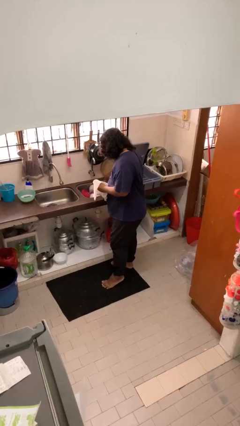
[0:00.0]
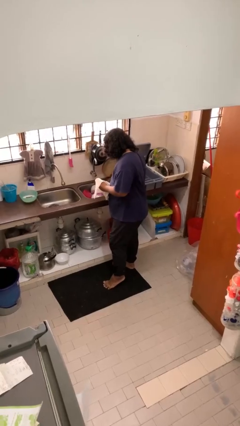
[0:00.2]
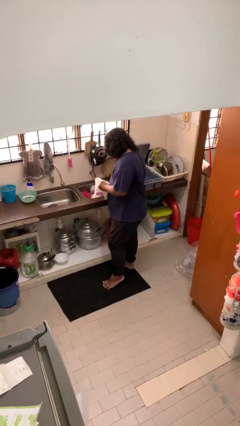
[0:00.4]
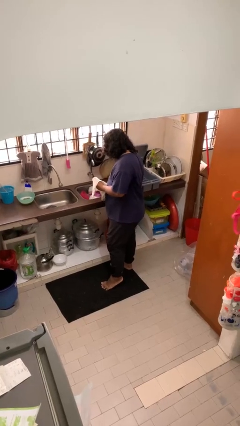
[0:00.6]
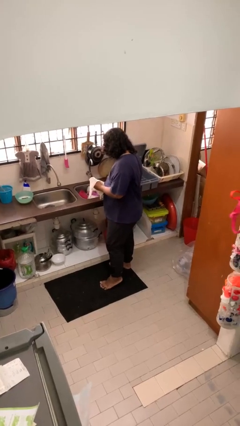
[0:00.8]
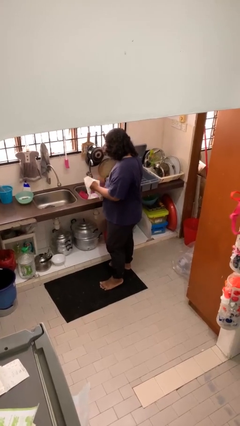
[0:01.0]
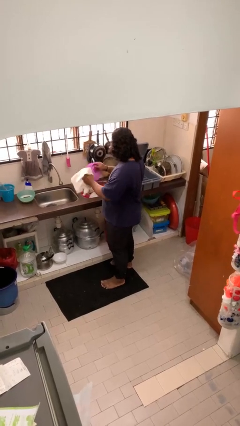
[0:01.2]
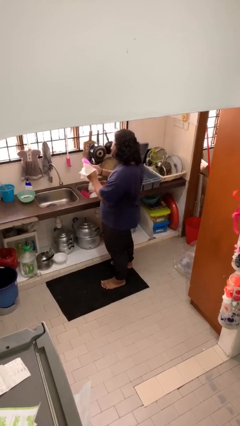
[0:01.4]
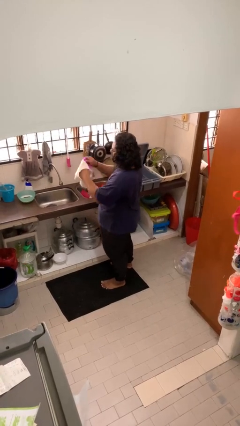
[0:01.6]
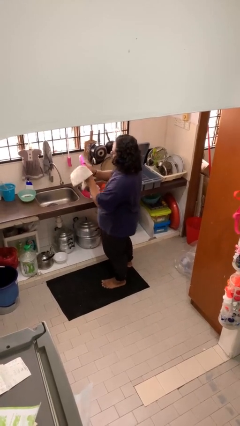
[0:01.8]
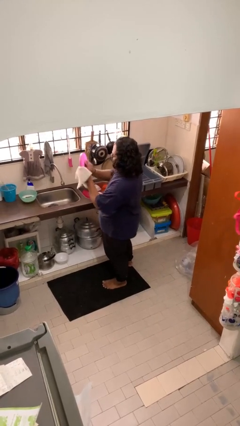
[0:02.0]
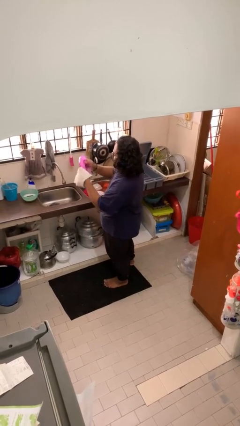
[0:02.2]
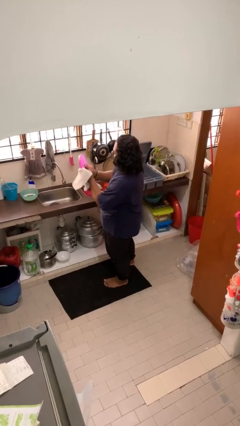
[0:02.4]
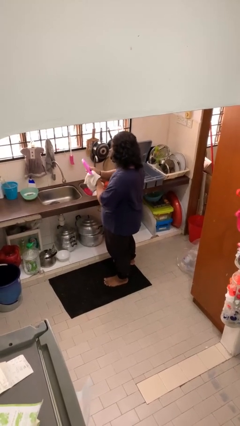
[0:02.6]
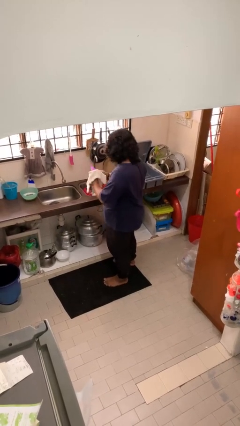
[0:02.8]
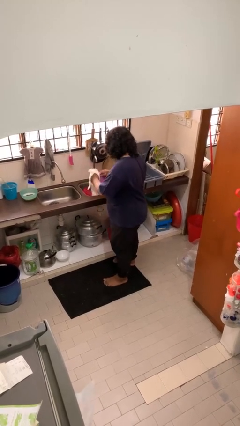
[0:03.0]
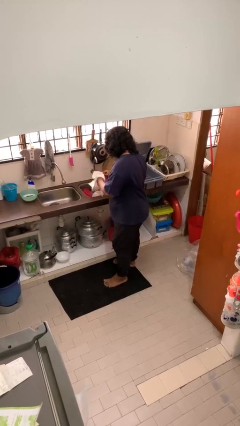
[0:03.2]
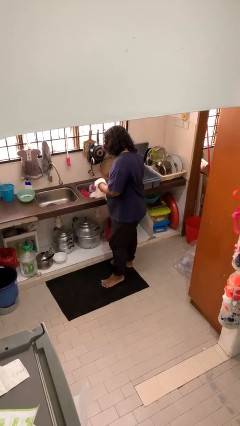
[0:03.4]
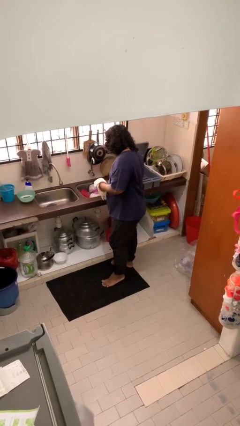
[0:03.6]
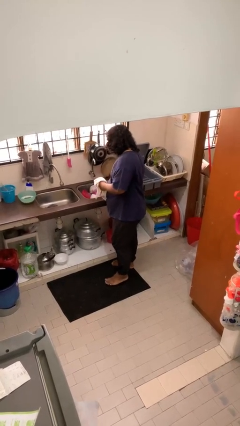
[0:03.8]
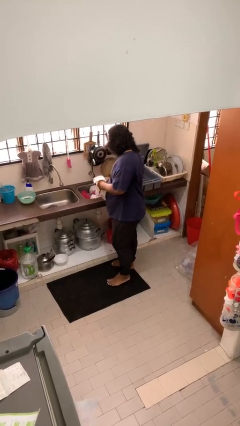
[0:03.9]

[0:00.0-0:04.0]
person dries dish

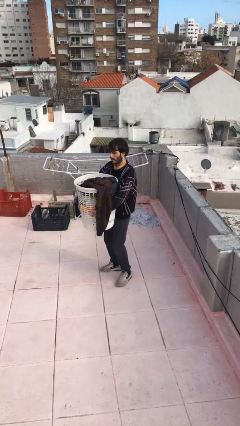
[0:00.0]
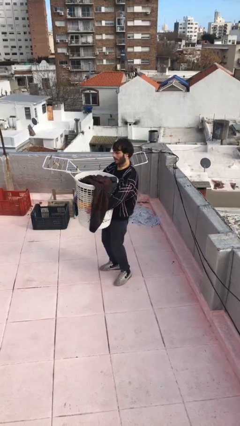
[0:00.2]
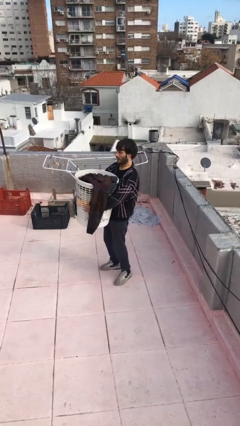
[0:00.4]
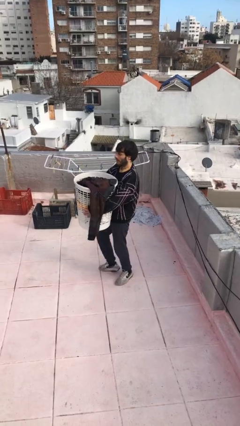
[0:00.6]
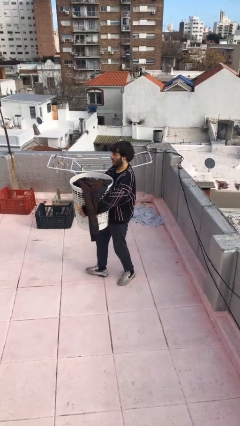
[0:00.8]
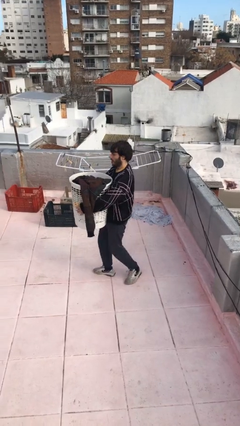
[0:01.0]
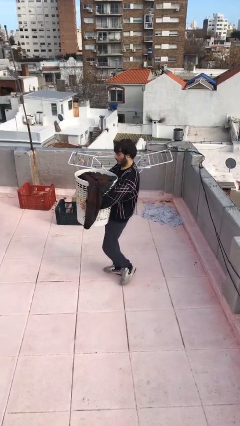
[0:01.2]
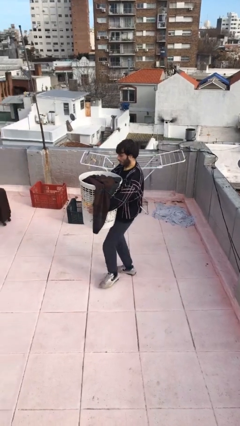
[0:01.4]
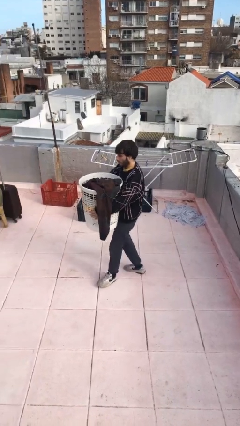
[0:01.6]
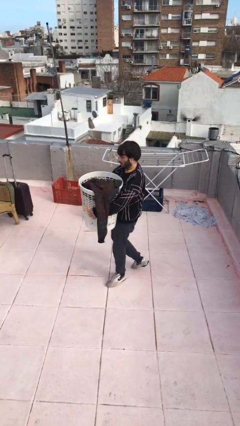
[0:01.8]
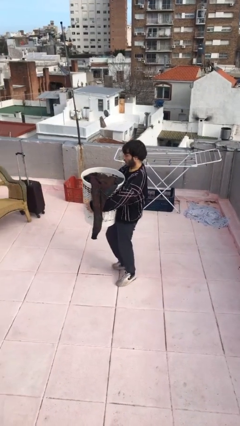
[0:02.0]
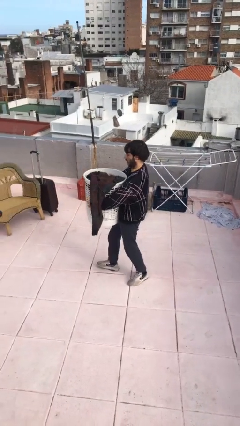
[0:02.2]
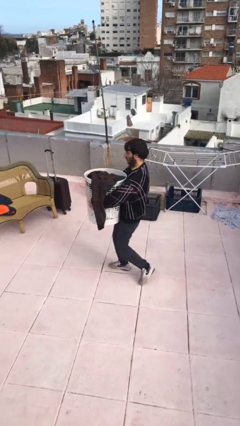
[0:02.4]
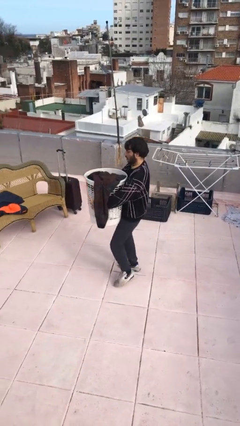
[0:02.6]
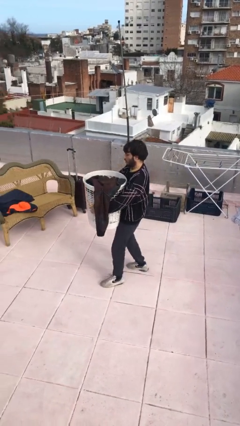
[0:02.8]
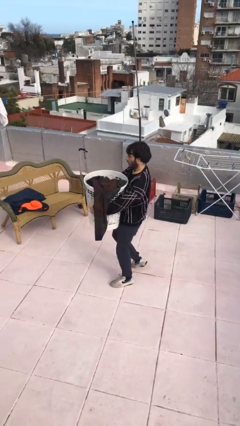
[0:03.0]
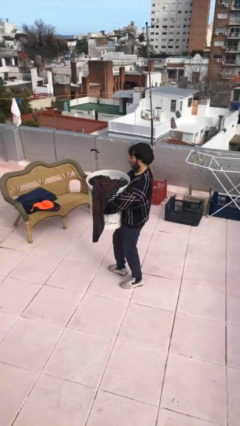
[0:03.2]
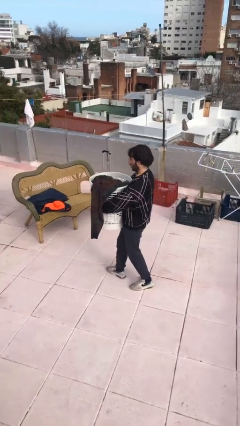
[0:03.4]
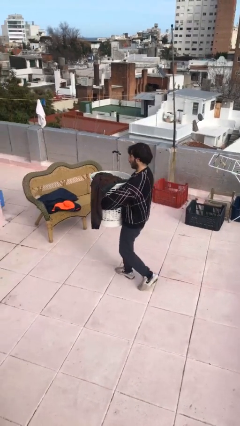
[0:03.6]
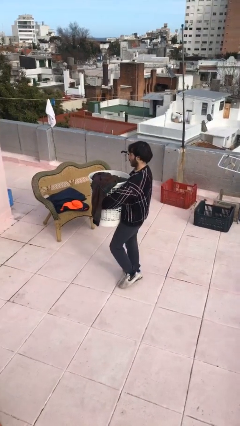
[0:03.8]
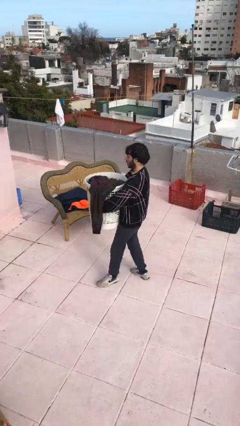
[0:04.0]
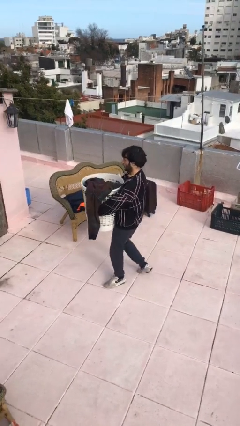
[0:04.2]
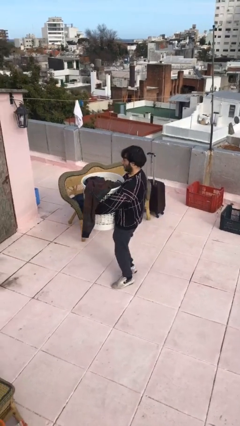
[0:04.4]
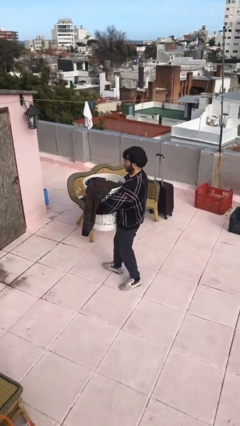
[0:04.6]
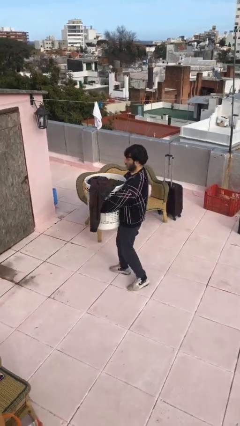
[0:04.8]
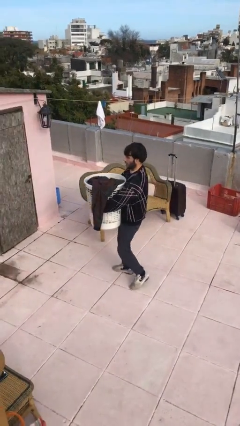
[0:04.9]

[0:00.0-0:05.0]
person carries laundry basket

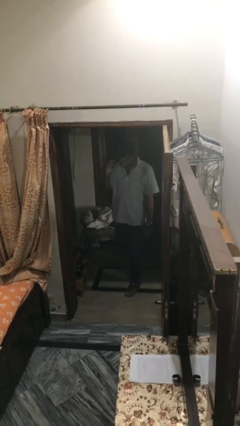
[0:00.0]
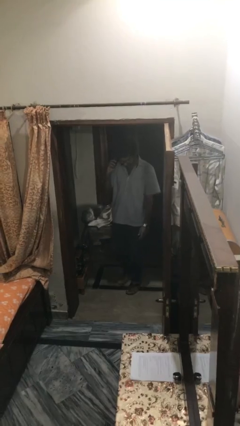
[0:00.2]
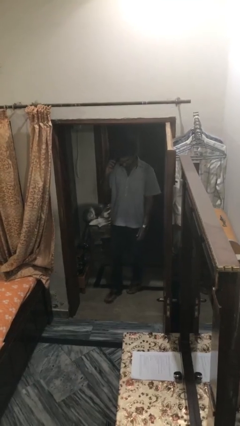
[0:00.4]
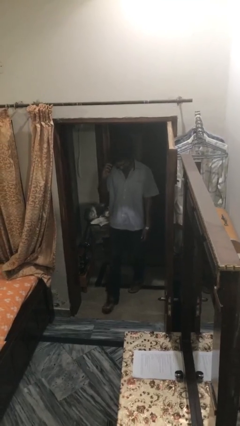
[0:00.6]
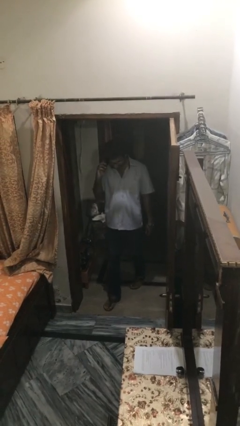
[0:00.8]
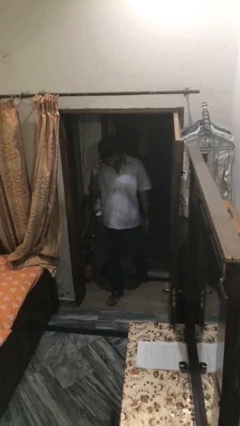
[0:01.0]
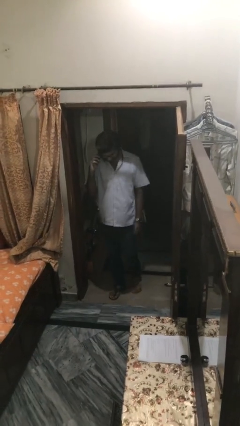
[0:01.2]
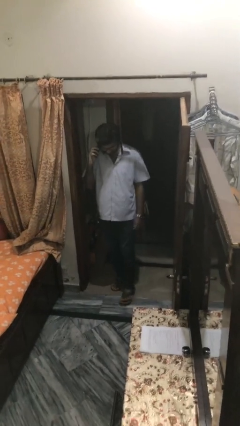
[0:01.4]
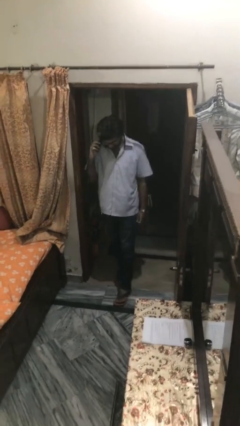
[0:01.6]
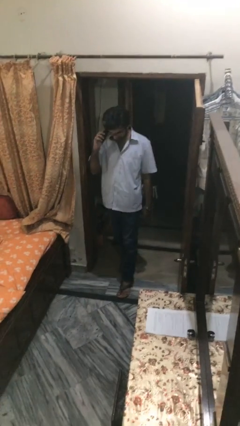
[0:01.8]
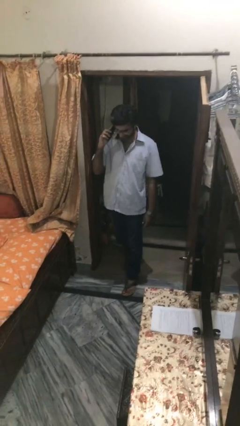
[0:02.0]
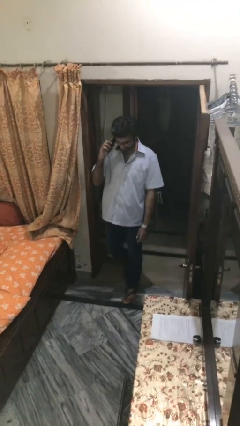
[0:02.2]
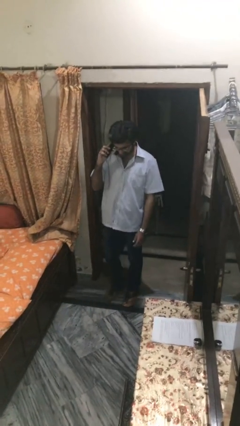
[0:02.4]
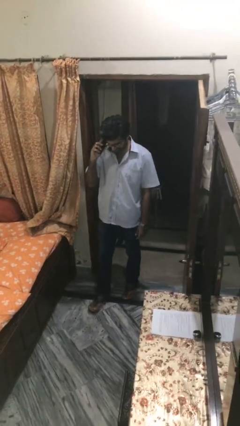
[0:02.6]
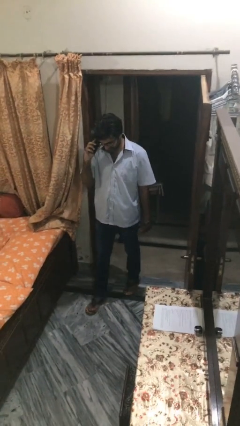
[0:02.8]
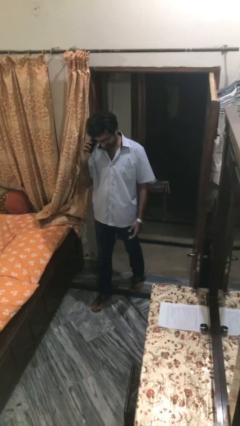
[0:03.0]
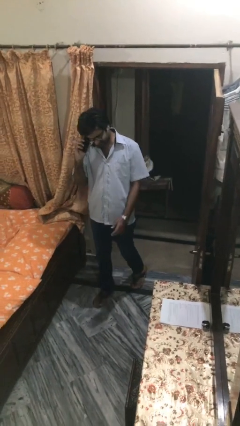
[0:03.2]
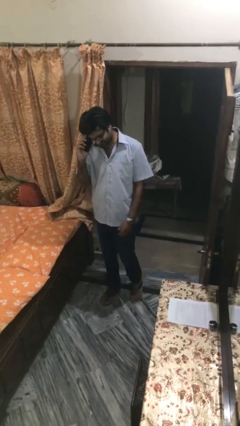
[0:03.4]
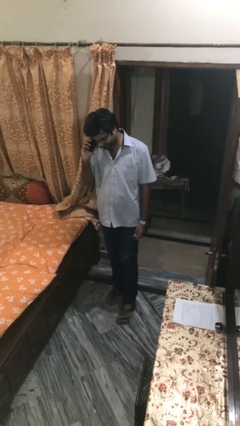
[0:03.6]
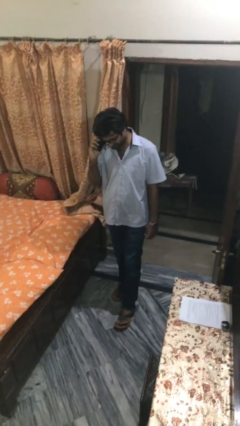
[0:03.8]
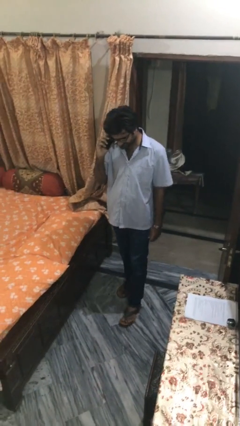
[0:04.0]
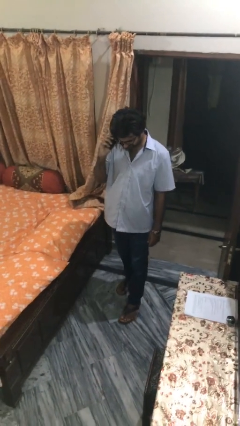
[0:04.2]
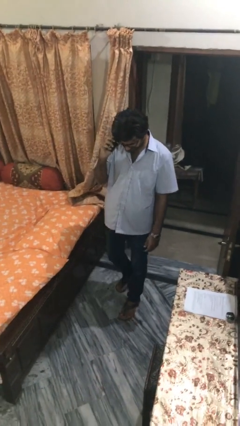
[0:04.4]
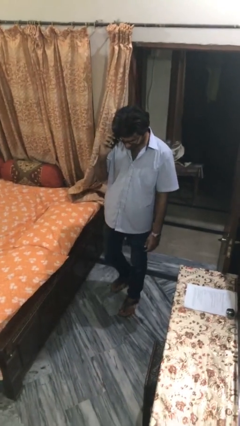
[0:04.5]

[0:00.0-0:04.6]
person enters scene through structure

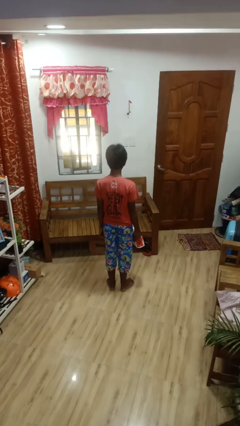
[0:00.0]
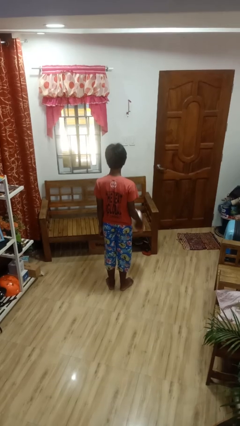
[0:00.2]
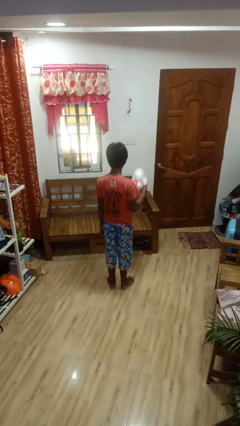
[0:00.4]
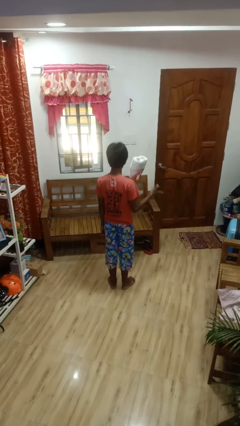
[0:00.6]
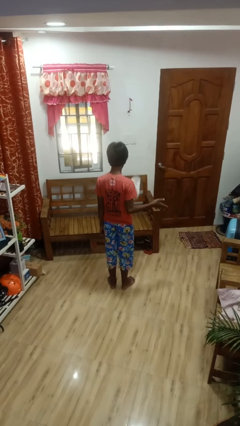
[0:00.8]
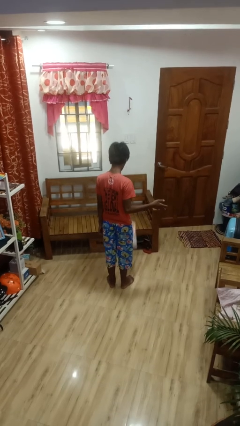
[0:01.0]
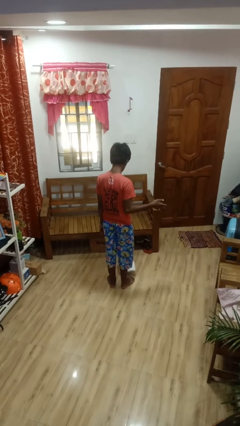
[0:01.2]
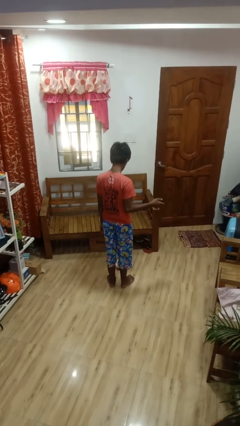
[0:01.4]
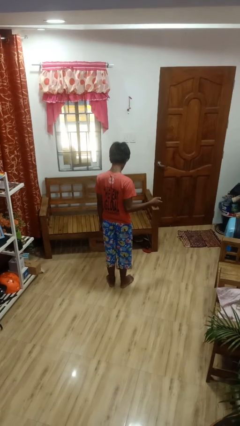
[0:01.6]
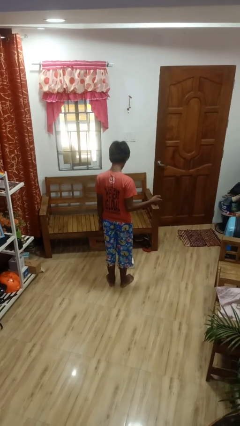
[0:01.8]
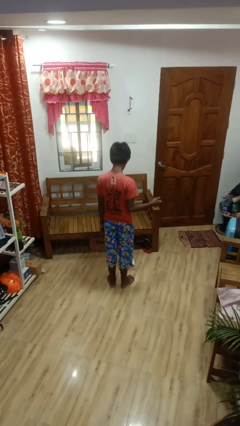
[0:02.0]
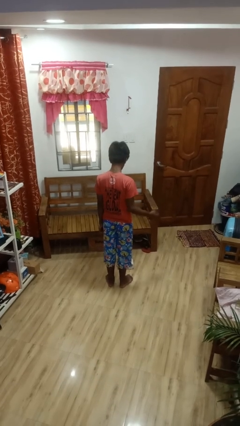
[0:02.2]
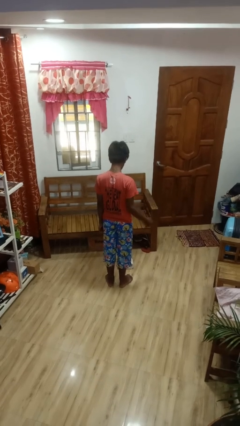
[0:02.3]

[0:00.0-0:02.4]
person throws object into air

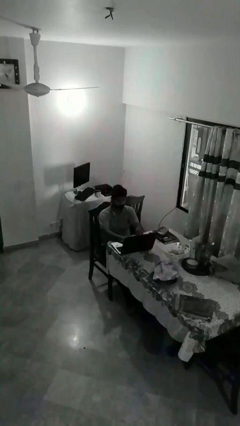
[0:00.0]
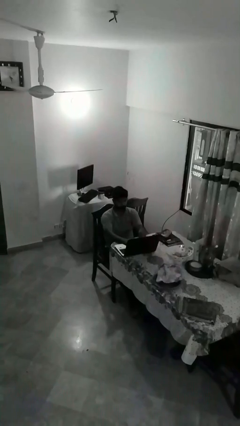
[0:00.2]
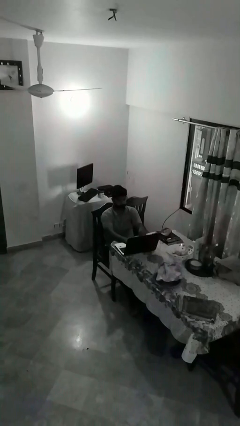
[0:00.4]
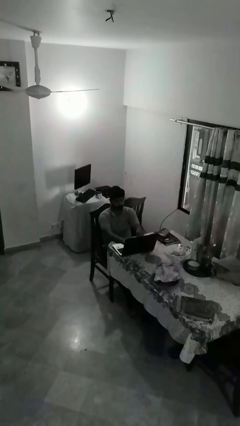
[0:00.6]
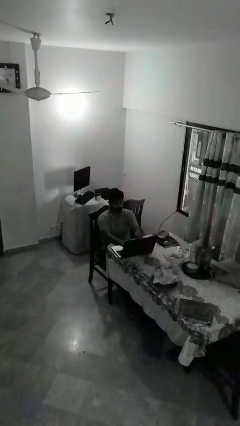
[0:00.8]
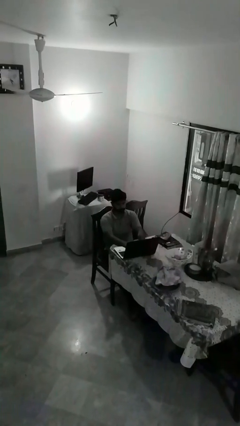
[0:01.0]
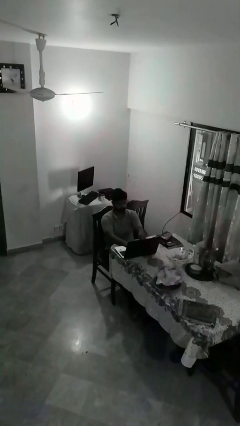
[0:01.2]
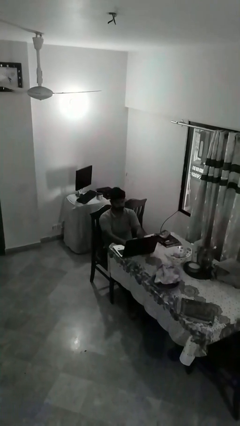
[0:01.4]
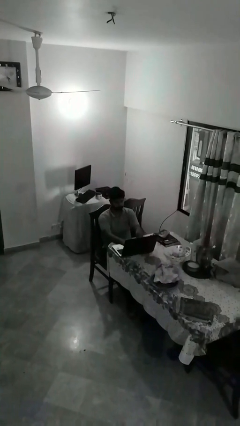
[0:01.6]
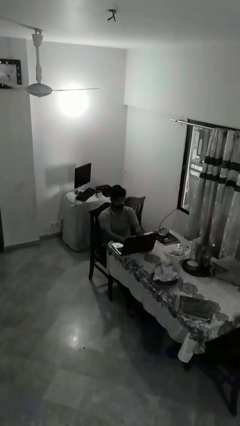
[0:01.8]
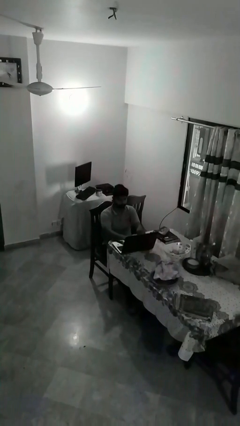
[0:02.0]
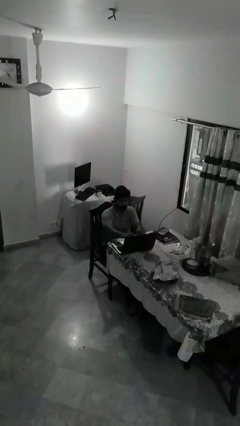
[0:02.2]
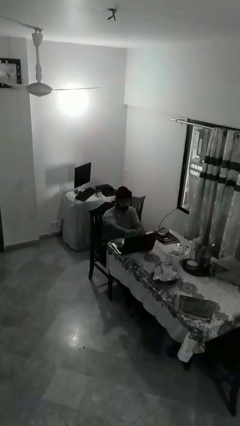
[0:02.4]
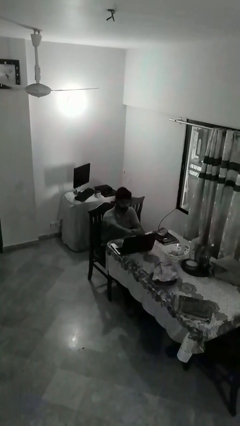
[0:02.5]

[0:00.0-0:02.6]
person interacts with laptop
